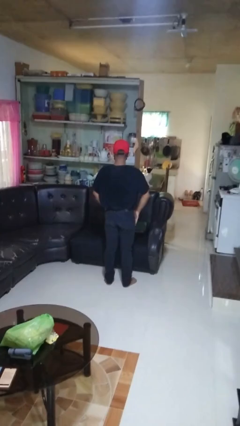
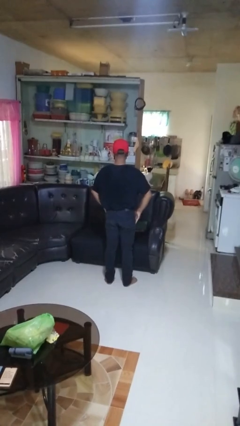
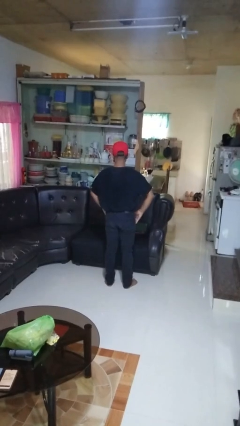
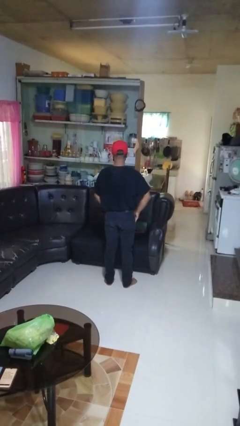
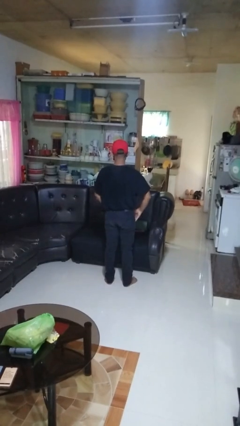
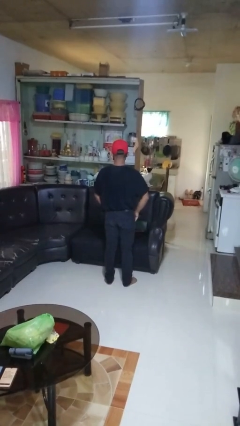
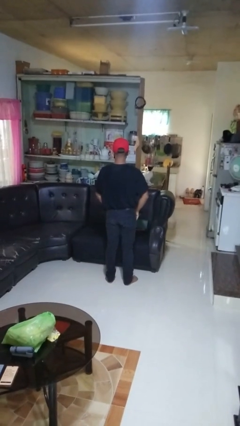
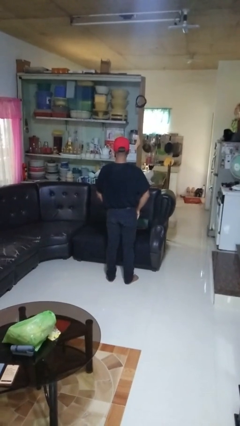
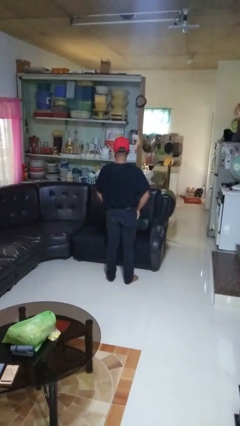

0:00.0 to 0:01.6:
person puts hands in back pockets

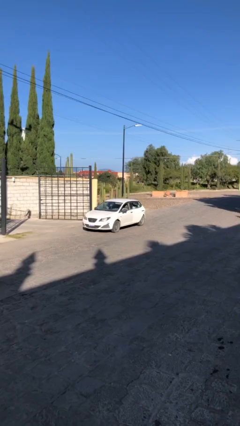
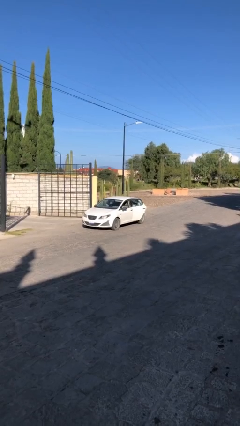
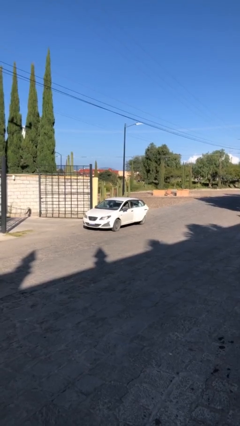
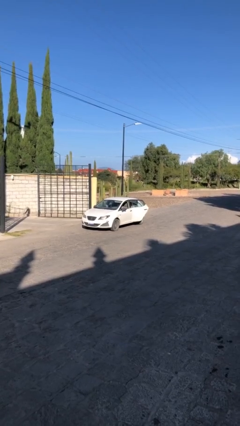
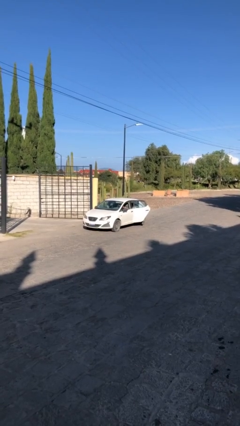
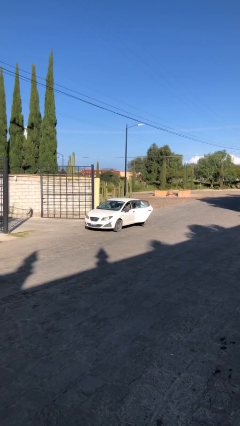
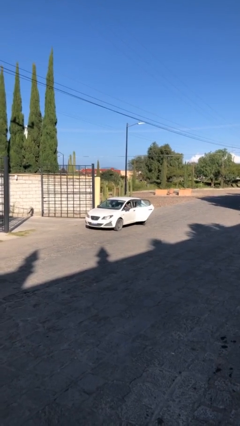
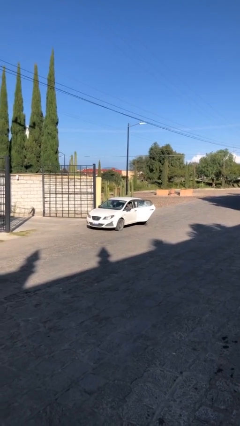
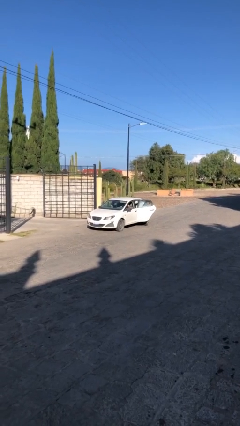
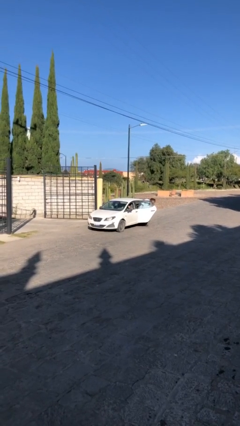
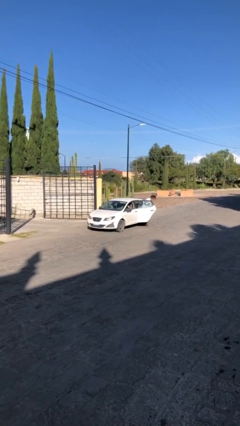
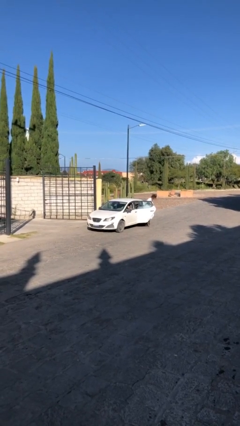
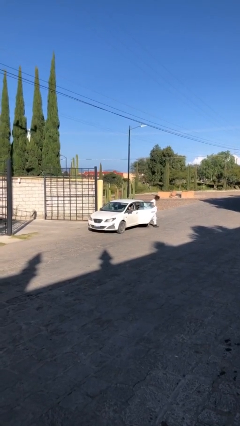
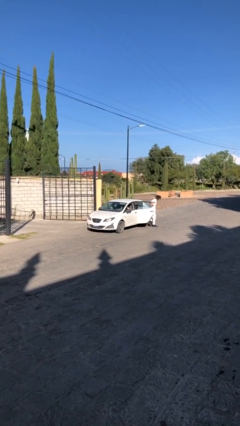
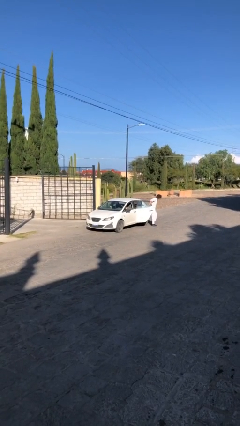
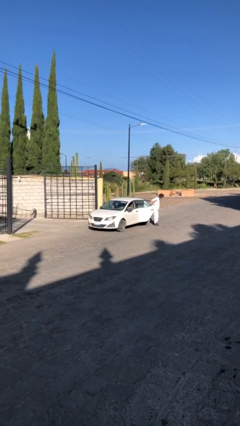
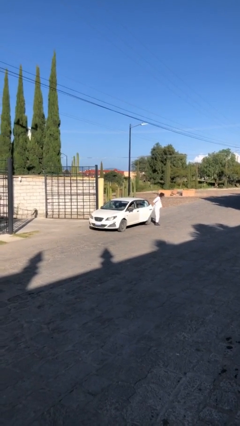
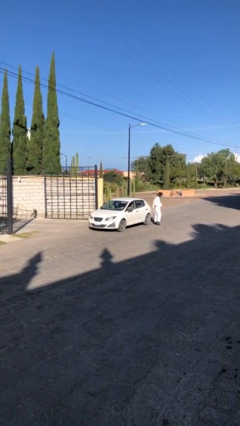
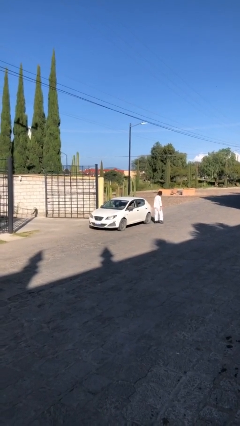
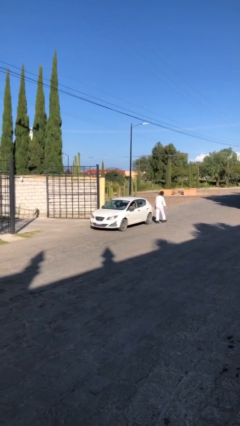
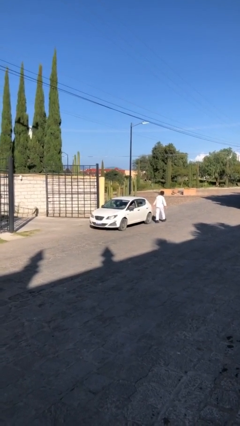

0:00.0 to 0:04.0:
car drops off person

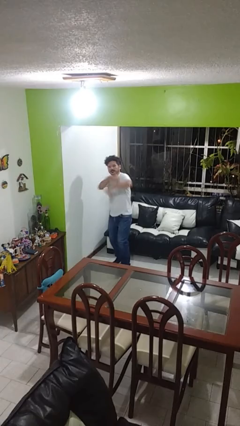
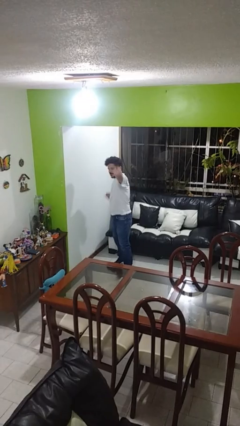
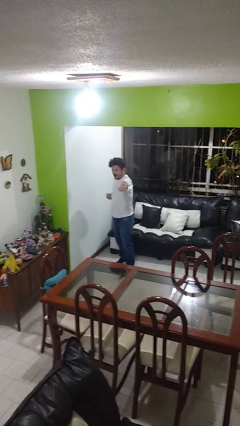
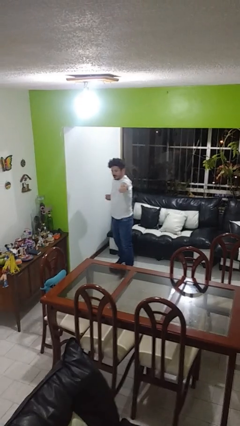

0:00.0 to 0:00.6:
person karate chop

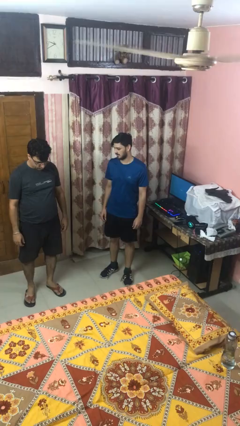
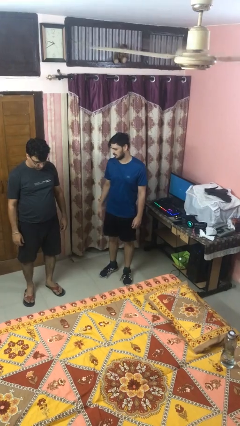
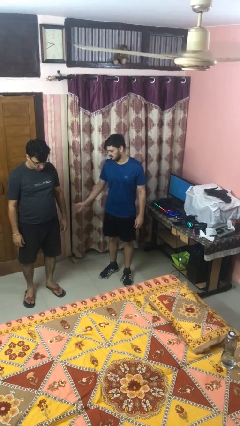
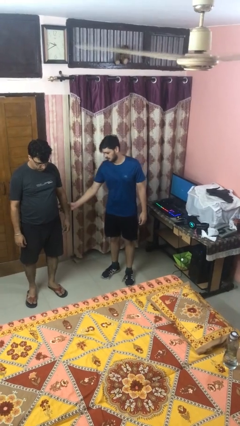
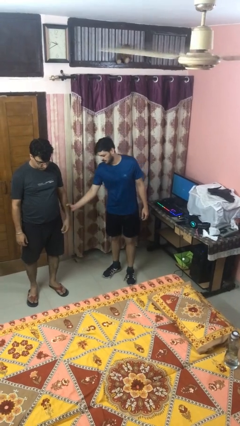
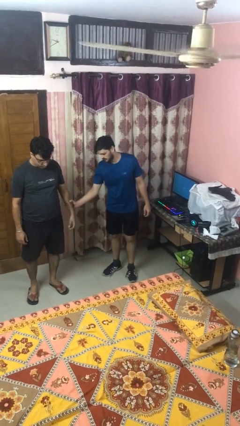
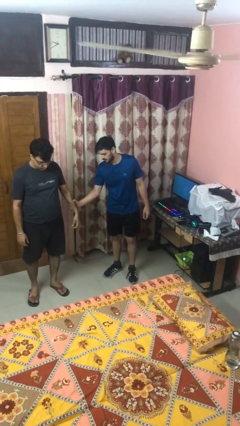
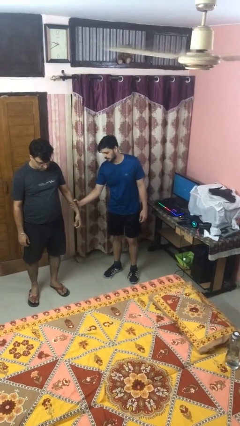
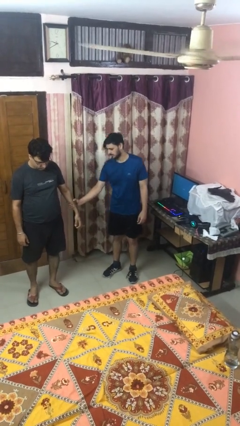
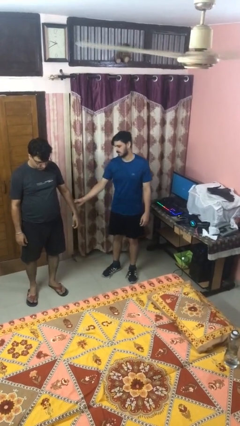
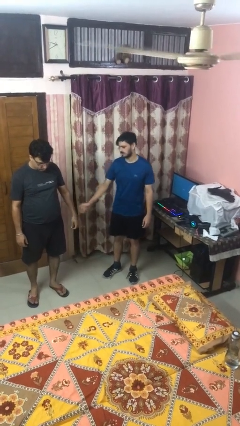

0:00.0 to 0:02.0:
person grabs person by forearm

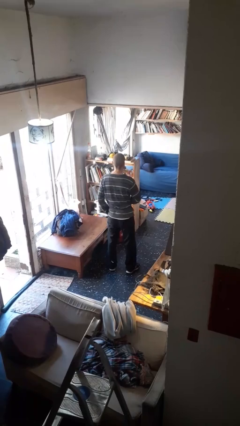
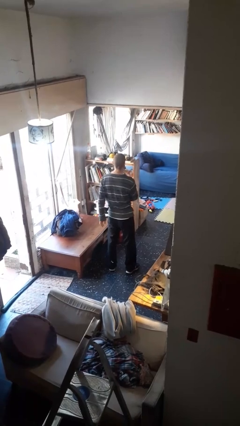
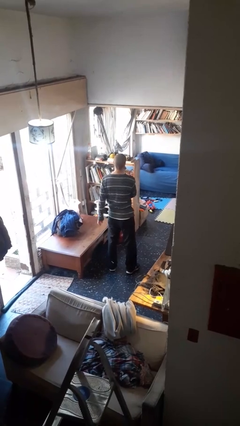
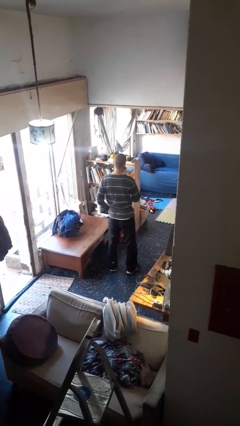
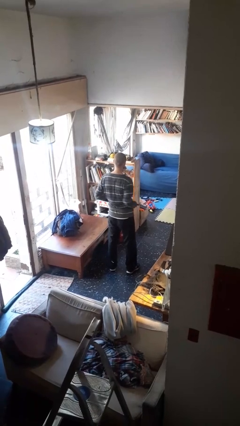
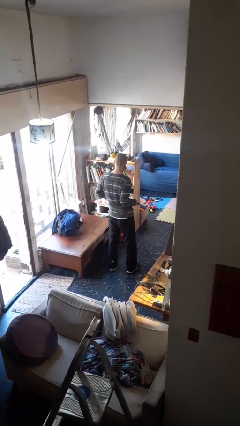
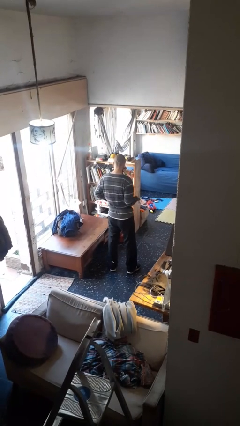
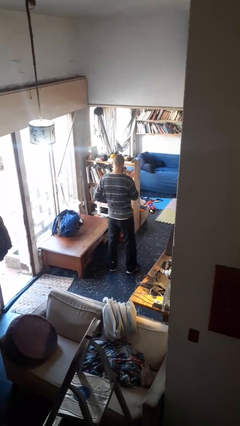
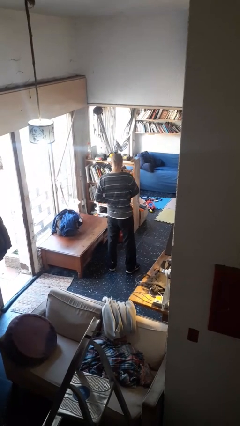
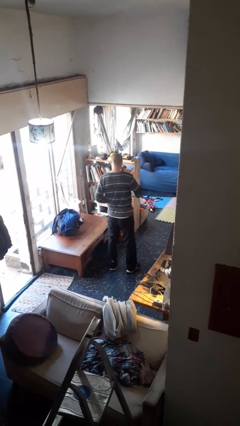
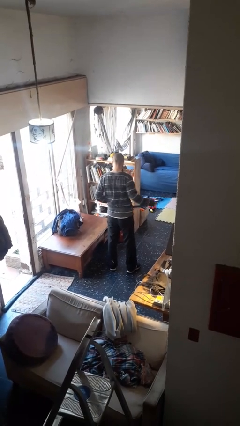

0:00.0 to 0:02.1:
person takes off belt

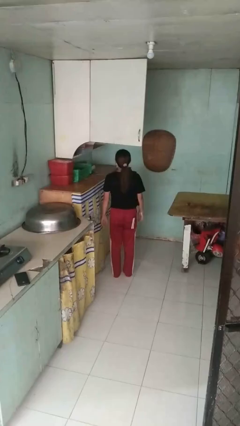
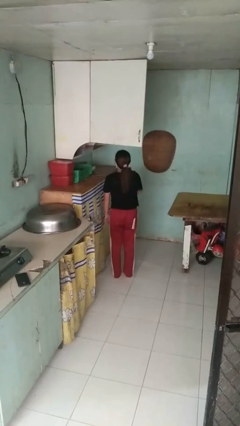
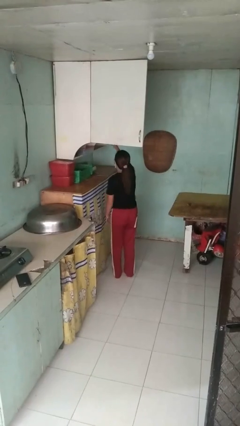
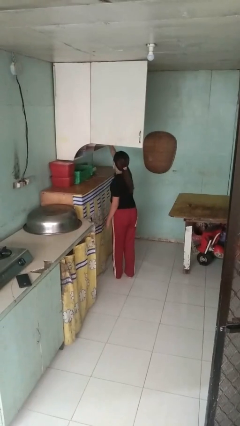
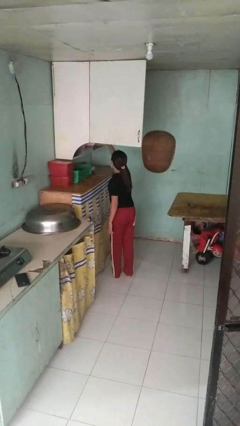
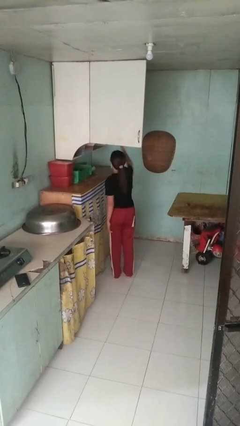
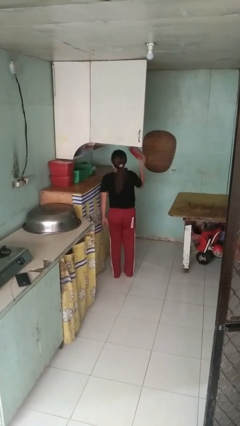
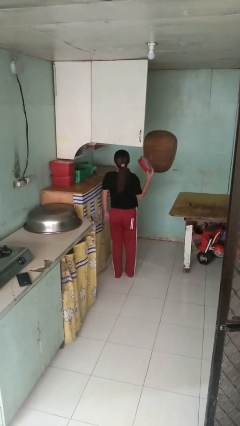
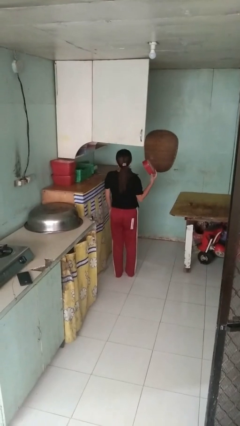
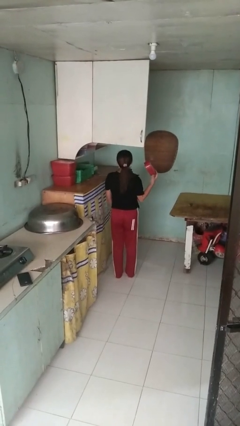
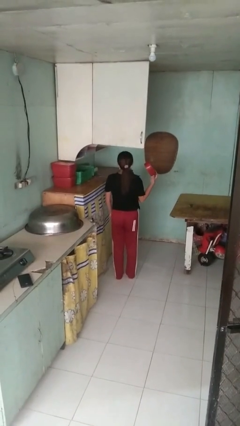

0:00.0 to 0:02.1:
person takes object from cabinet

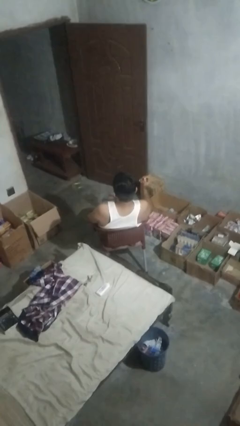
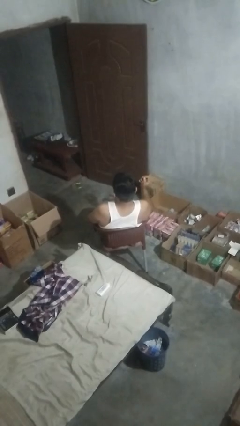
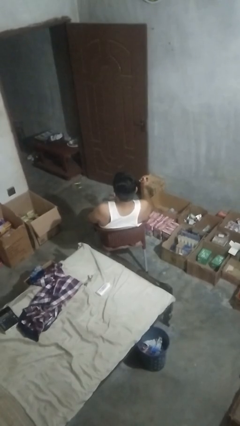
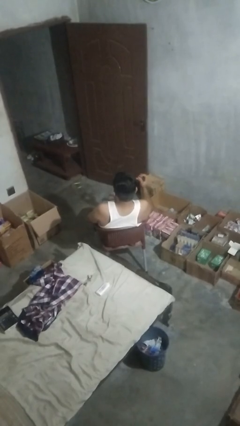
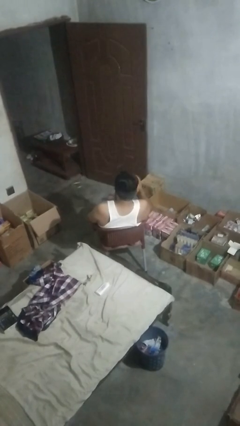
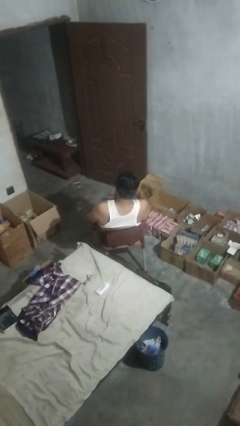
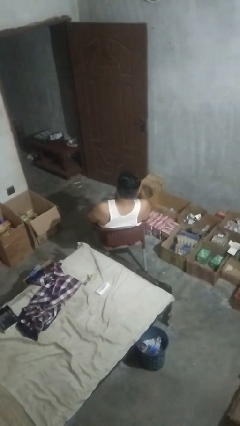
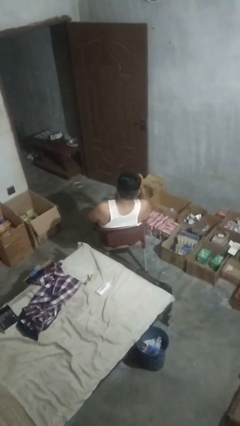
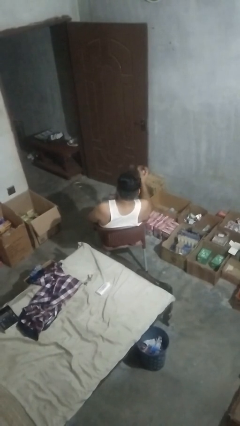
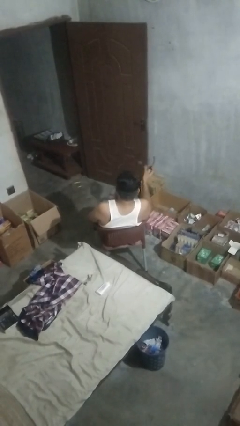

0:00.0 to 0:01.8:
person takes off sunglasses

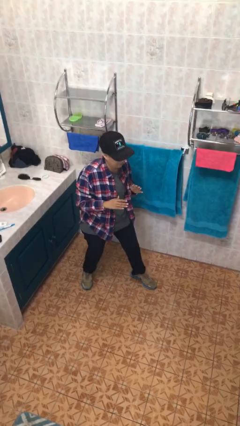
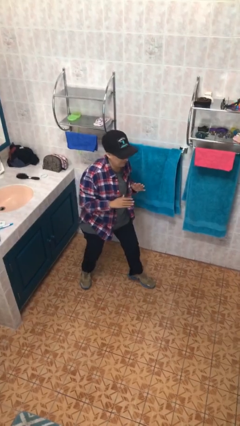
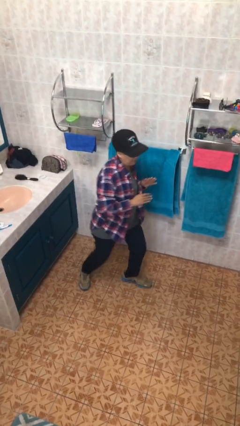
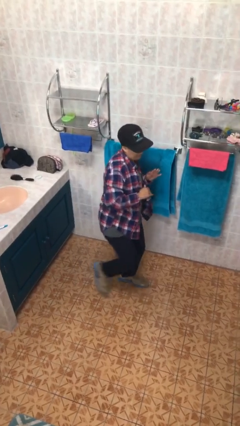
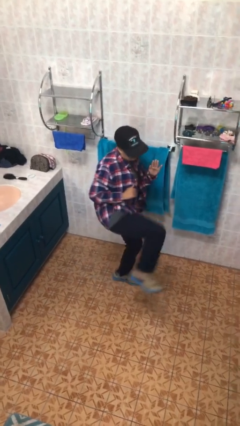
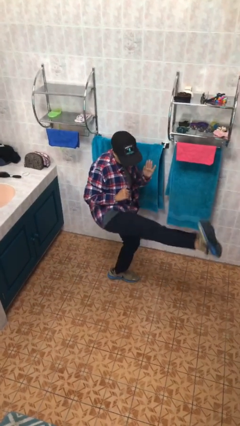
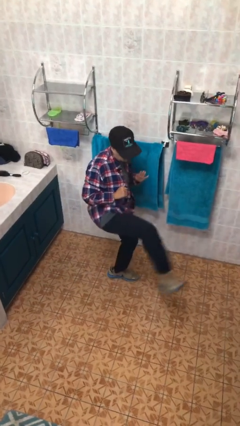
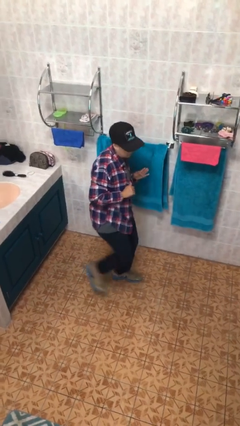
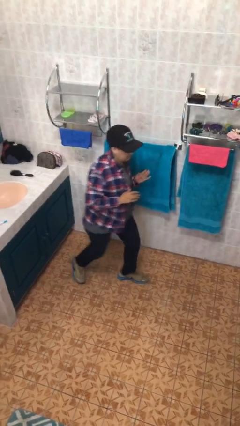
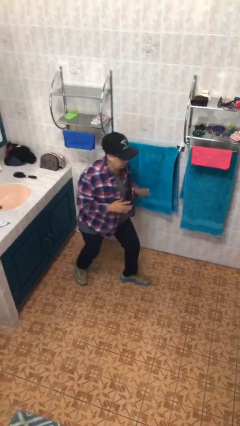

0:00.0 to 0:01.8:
person karate kicks

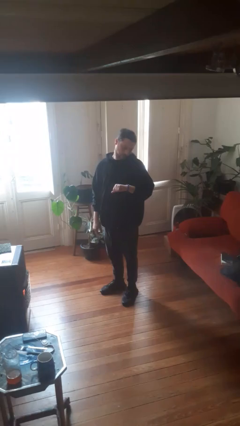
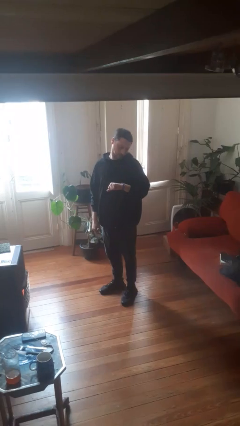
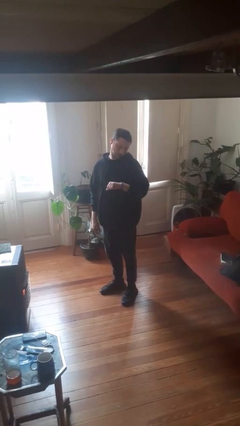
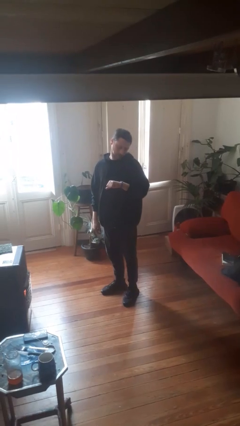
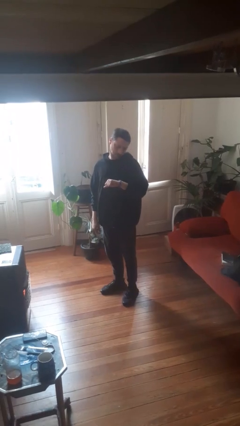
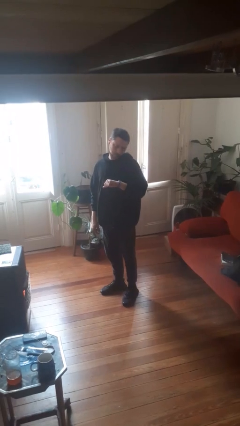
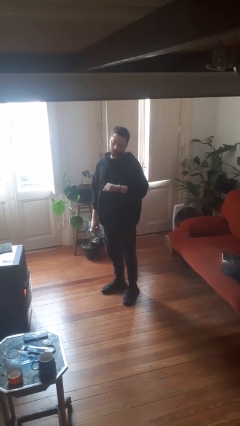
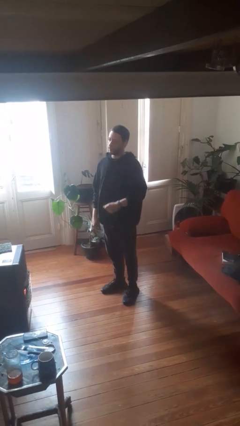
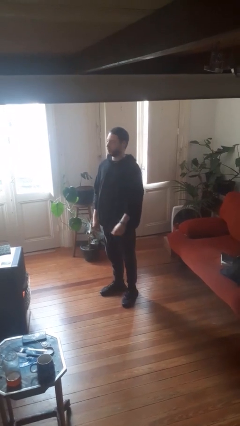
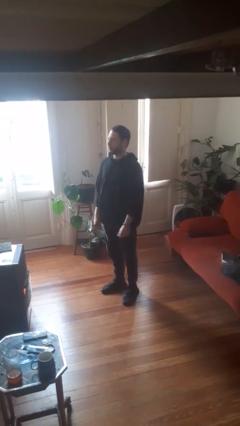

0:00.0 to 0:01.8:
person looks at wristwatch
